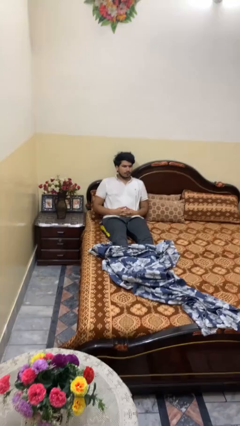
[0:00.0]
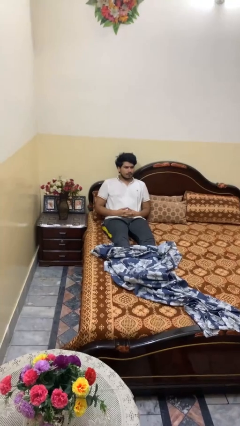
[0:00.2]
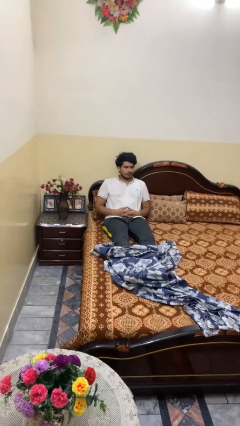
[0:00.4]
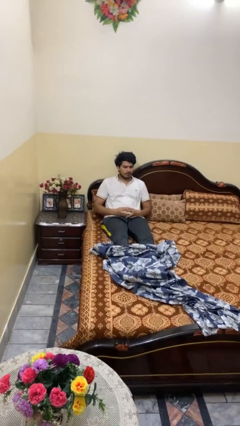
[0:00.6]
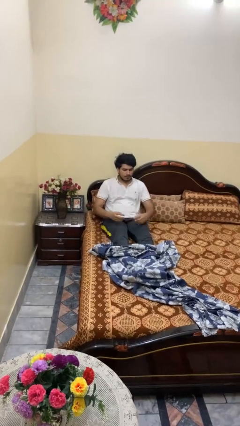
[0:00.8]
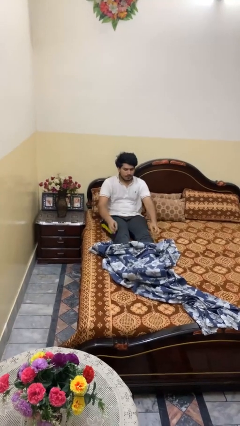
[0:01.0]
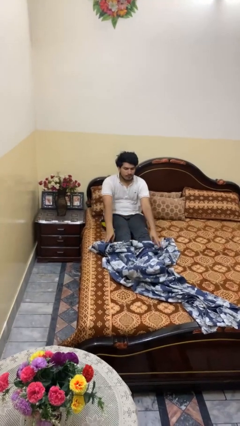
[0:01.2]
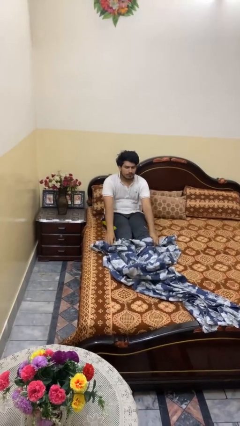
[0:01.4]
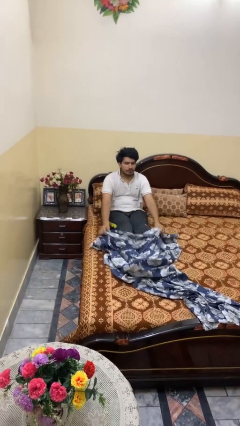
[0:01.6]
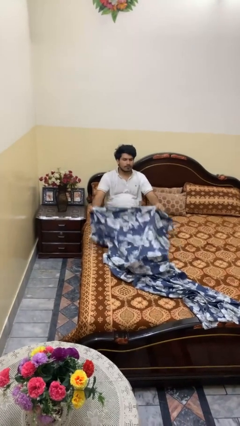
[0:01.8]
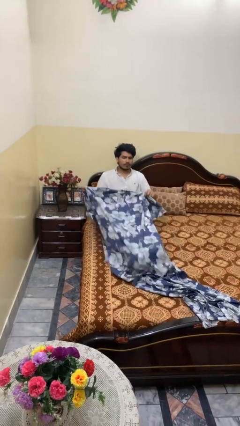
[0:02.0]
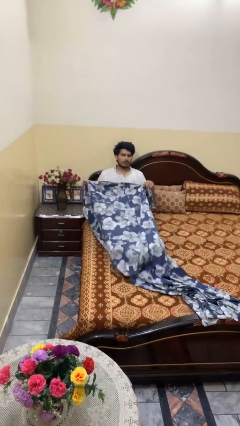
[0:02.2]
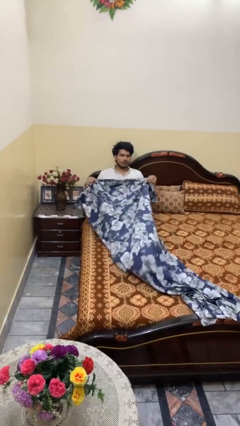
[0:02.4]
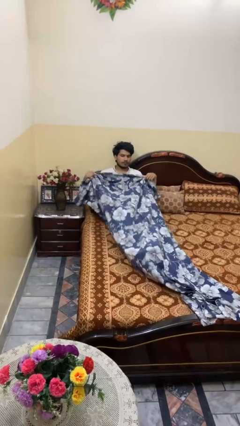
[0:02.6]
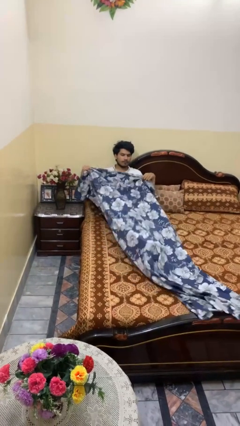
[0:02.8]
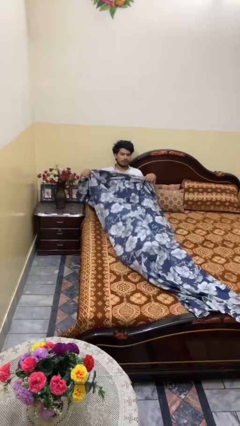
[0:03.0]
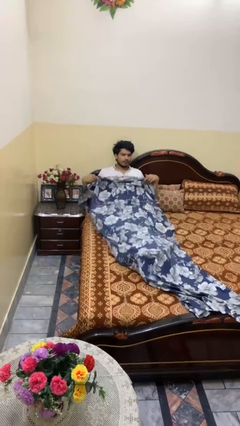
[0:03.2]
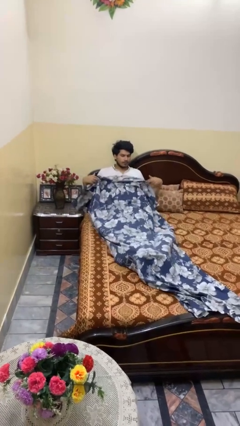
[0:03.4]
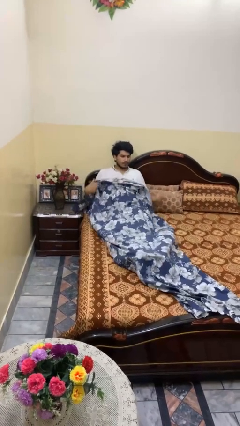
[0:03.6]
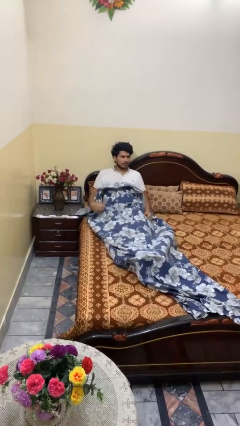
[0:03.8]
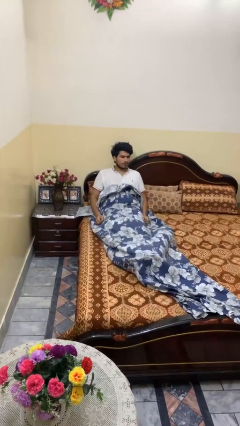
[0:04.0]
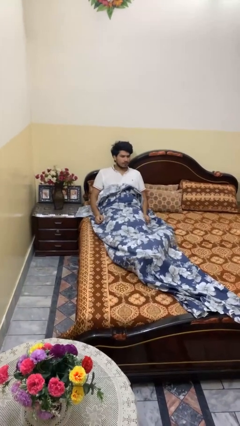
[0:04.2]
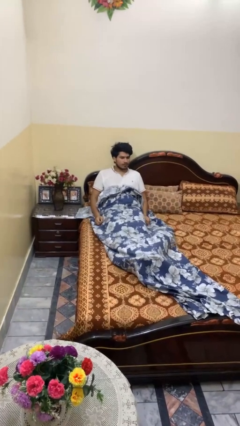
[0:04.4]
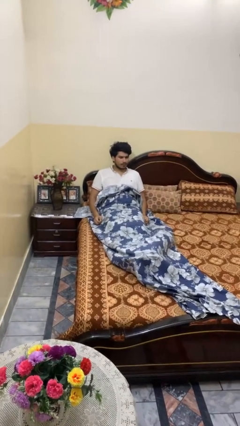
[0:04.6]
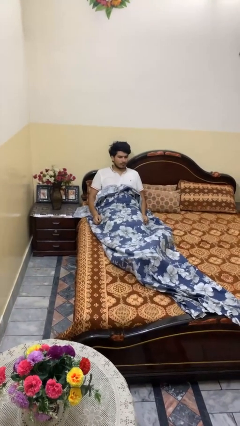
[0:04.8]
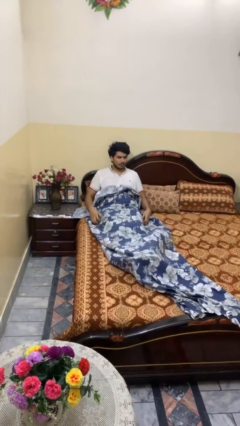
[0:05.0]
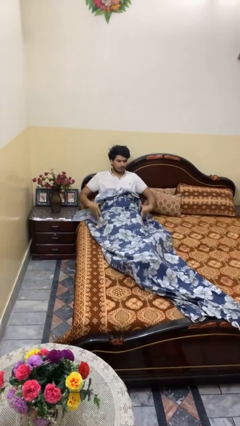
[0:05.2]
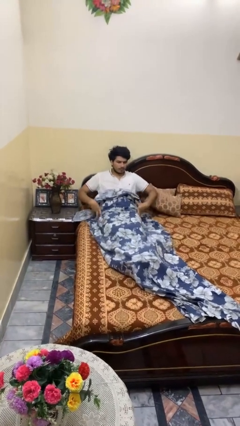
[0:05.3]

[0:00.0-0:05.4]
person covers with bedsheets

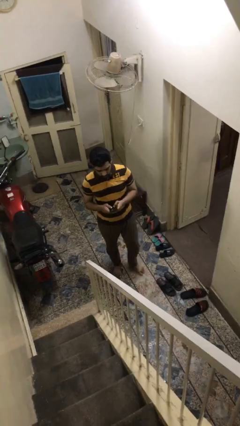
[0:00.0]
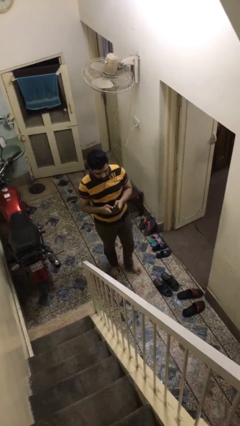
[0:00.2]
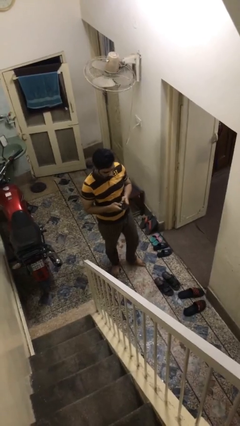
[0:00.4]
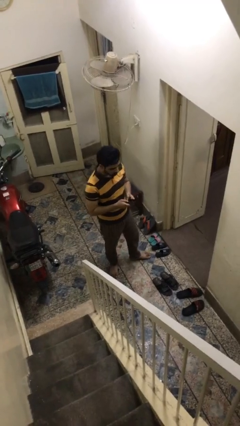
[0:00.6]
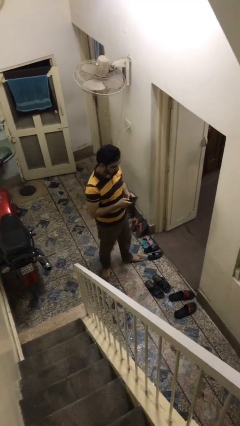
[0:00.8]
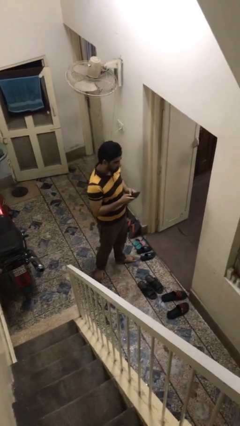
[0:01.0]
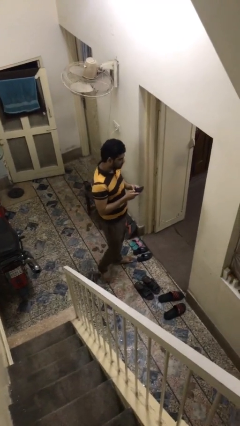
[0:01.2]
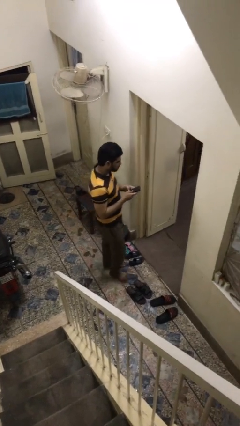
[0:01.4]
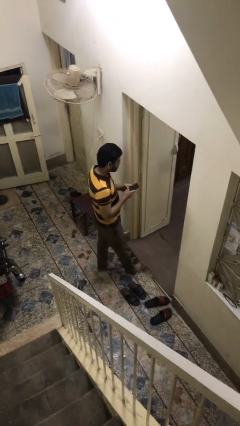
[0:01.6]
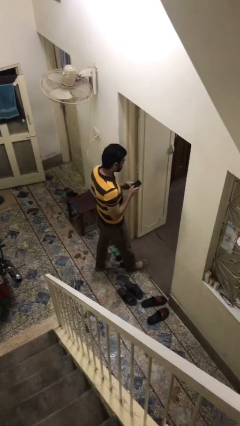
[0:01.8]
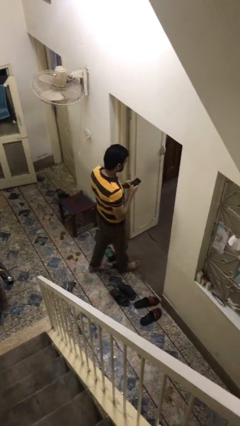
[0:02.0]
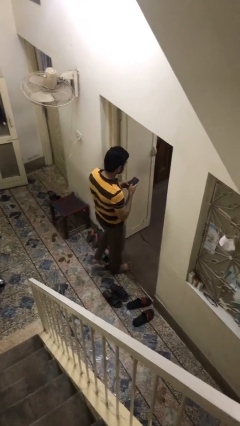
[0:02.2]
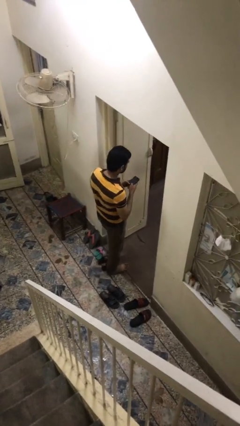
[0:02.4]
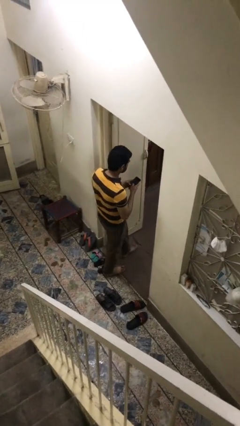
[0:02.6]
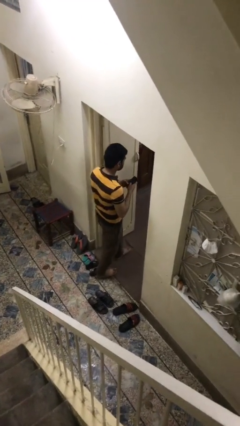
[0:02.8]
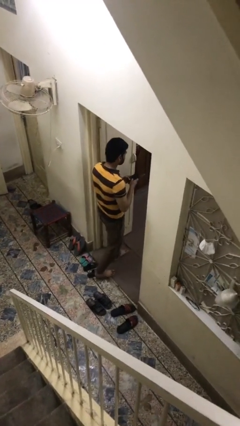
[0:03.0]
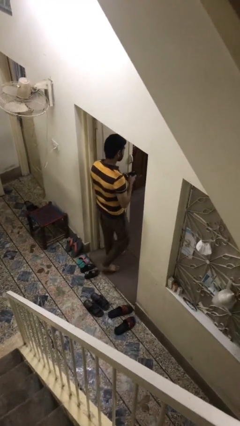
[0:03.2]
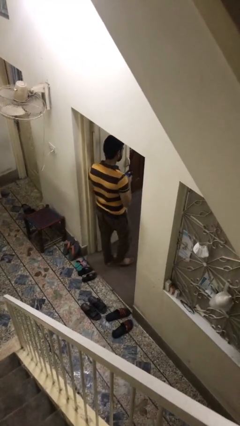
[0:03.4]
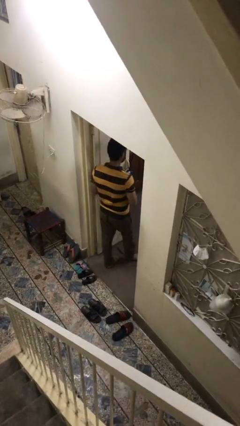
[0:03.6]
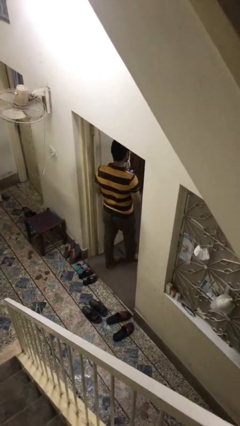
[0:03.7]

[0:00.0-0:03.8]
person exits scene through structure

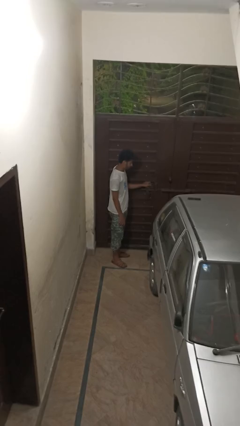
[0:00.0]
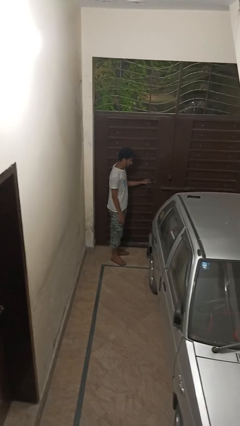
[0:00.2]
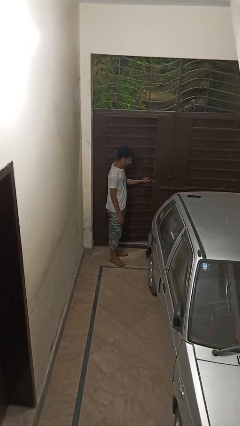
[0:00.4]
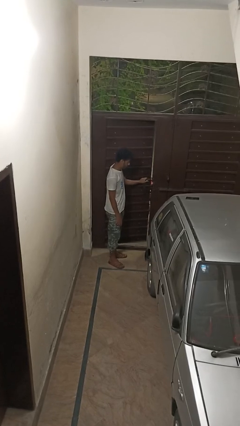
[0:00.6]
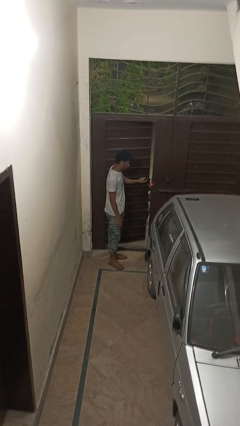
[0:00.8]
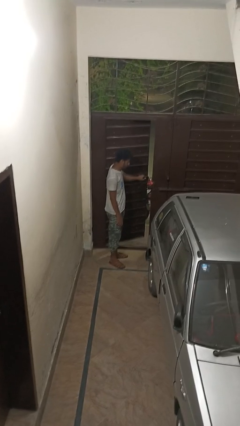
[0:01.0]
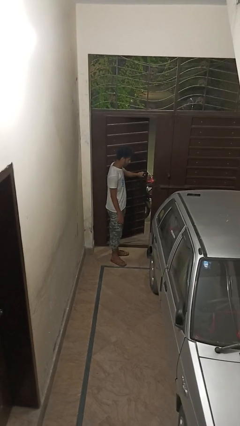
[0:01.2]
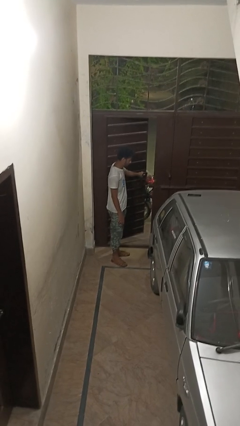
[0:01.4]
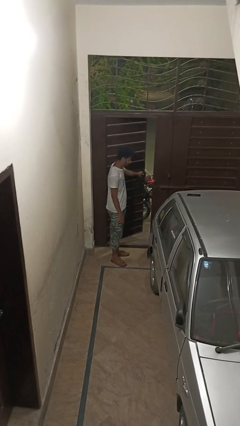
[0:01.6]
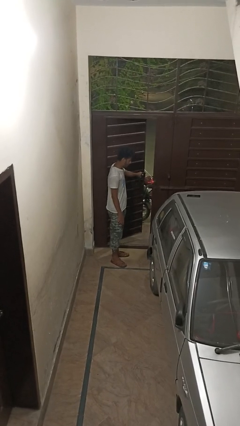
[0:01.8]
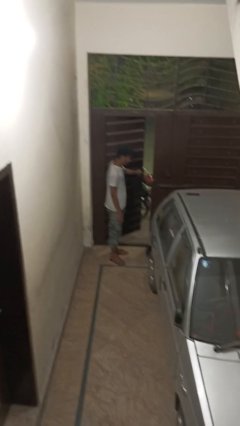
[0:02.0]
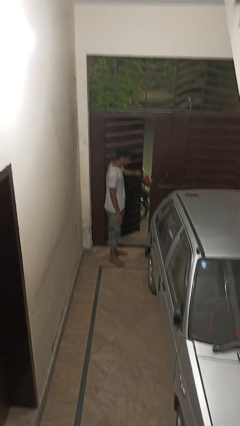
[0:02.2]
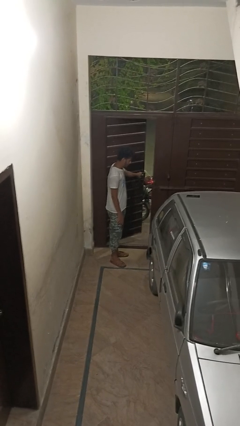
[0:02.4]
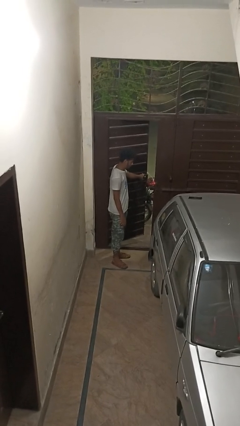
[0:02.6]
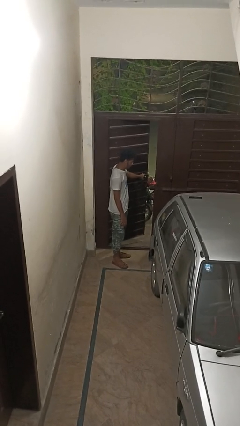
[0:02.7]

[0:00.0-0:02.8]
person opens gate

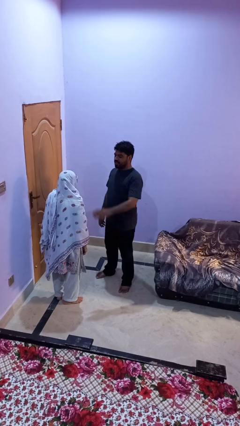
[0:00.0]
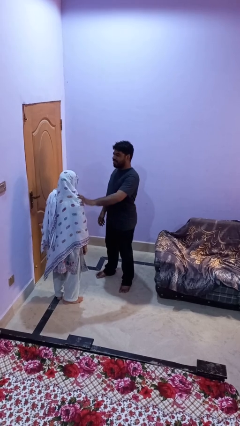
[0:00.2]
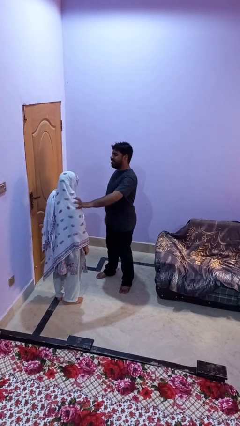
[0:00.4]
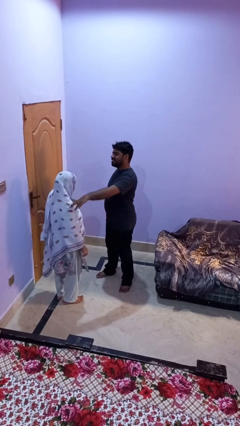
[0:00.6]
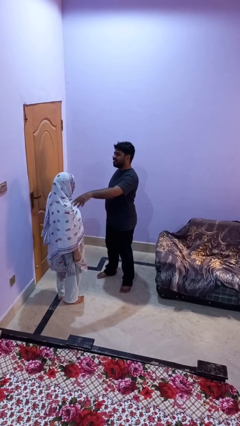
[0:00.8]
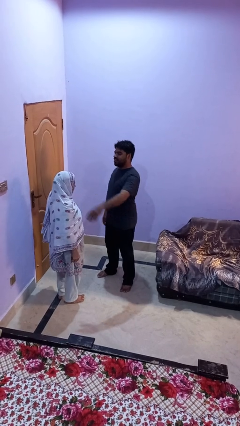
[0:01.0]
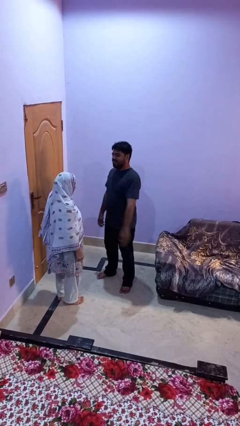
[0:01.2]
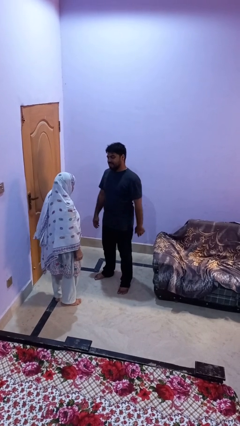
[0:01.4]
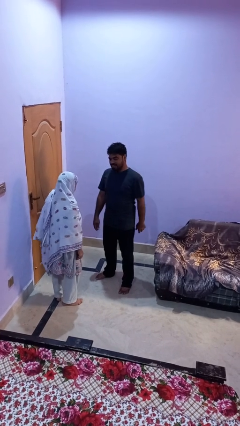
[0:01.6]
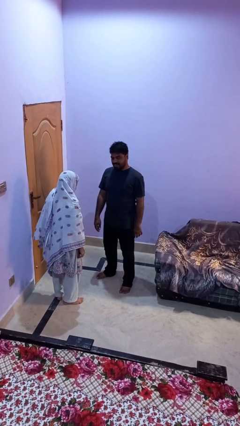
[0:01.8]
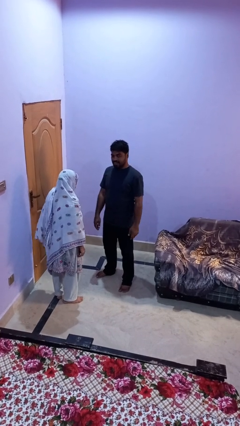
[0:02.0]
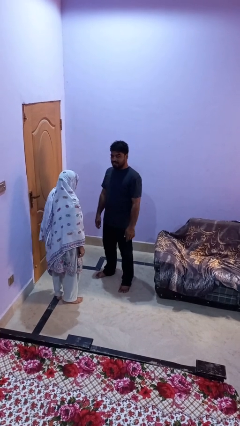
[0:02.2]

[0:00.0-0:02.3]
person shoves person

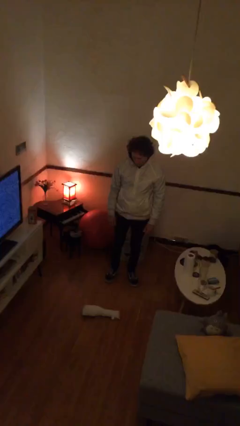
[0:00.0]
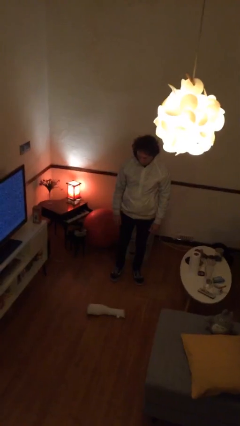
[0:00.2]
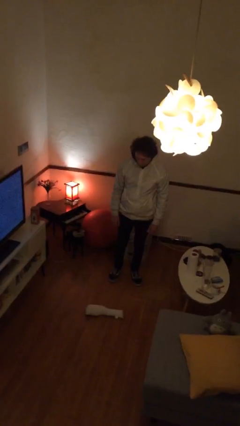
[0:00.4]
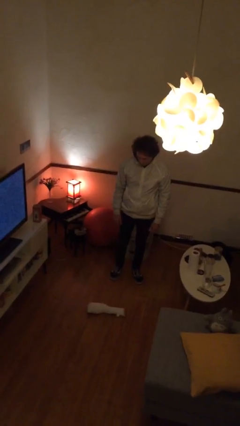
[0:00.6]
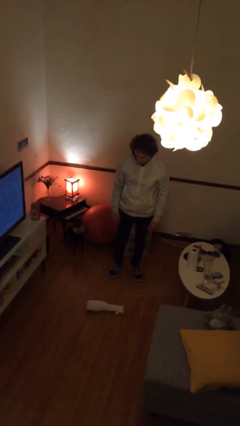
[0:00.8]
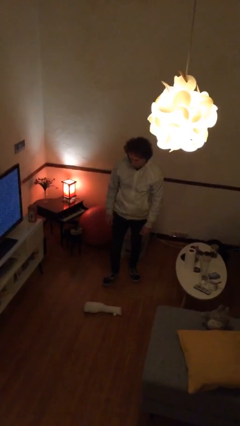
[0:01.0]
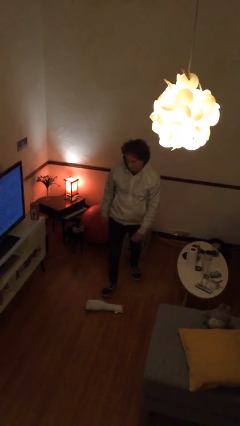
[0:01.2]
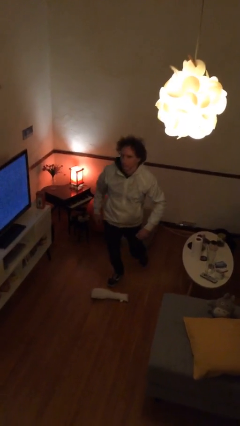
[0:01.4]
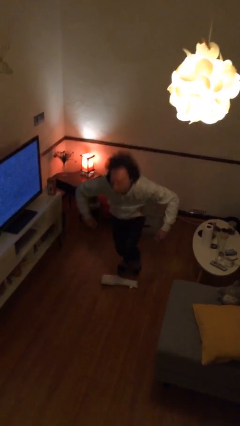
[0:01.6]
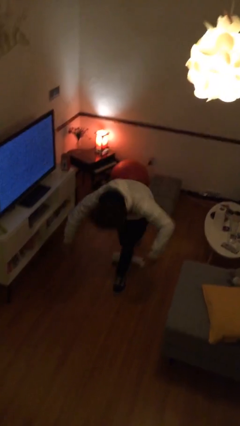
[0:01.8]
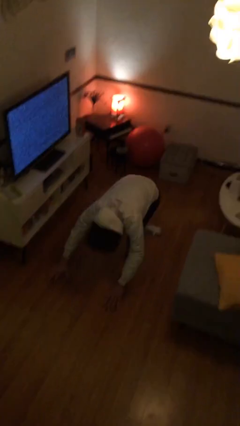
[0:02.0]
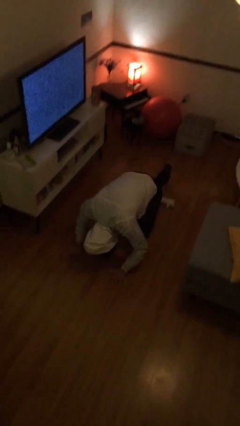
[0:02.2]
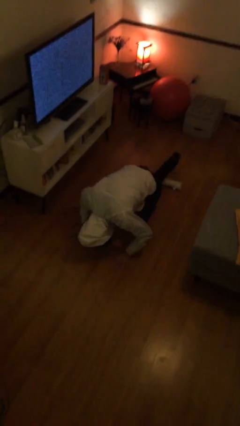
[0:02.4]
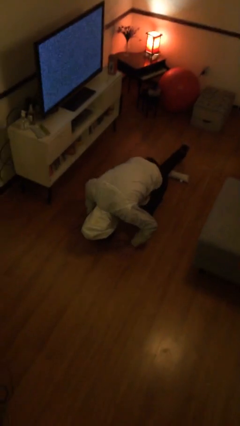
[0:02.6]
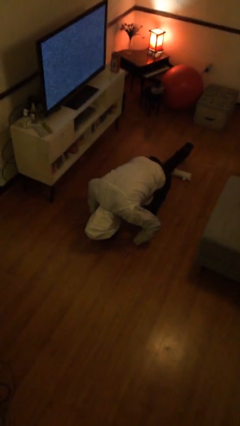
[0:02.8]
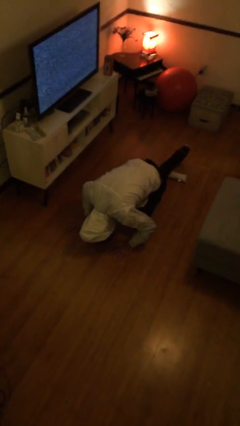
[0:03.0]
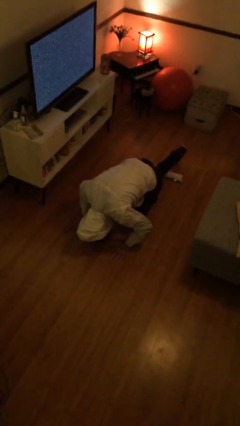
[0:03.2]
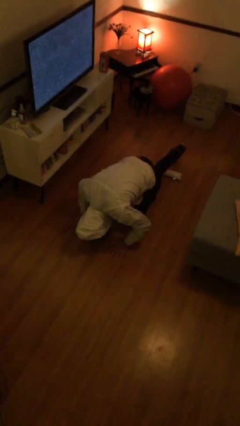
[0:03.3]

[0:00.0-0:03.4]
person trips on object on floor
